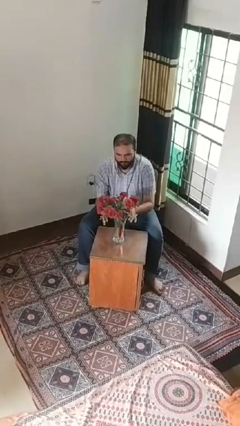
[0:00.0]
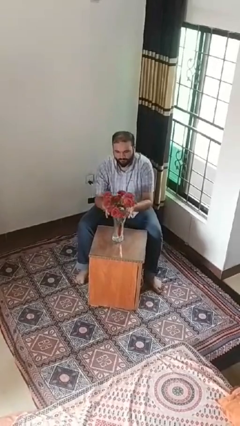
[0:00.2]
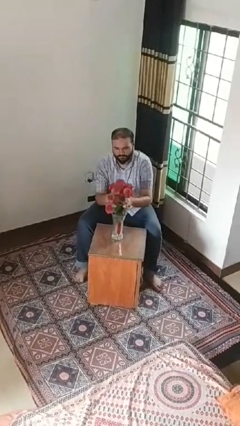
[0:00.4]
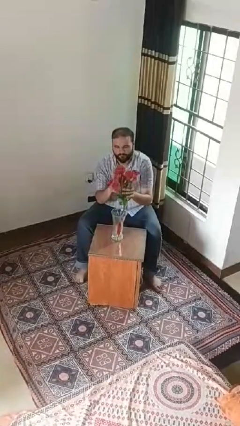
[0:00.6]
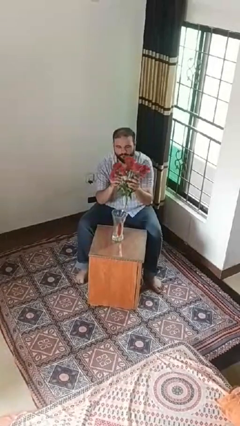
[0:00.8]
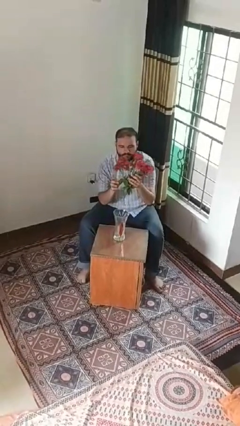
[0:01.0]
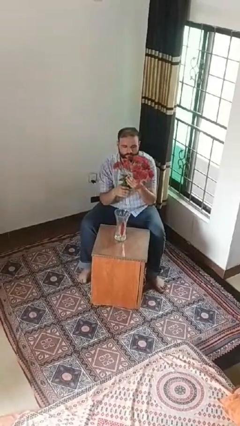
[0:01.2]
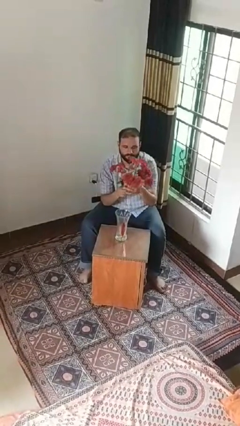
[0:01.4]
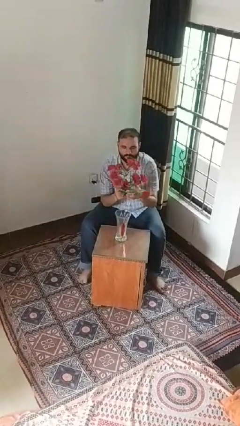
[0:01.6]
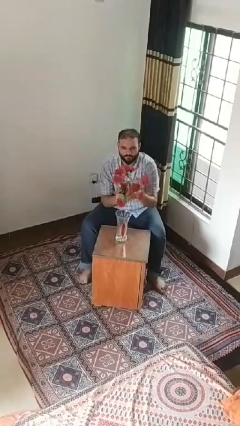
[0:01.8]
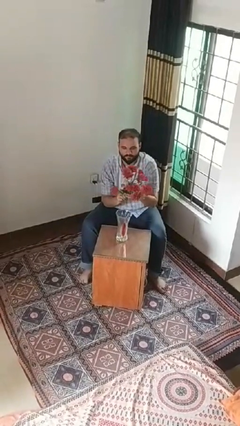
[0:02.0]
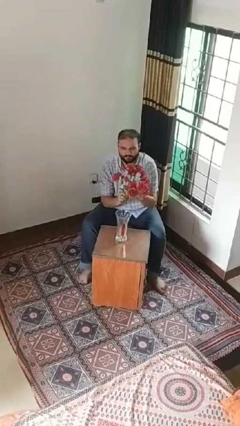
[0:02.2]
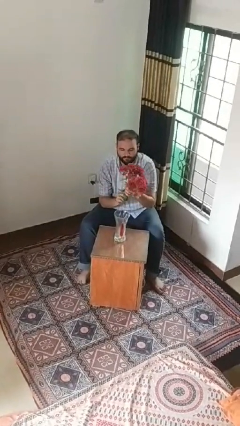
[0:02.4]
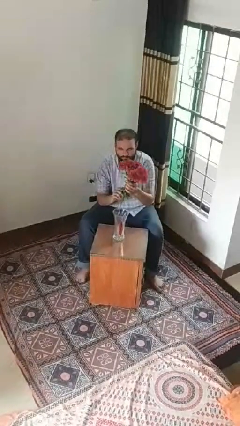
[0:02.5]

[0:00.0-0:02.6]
person arranges flowers in vase

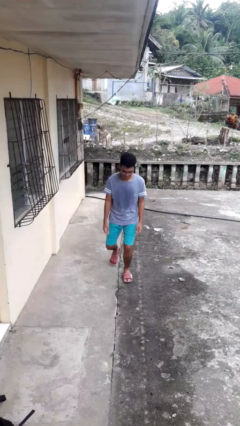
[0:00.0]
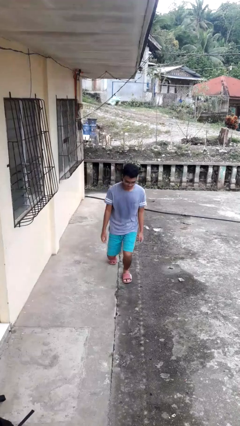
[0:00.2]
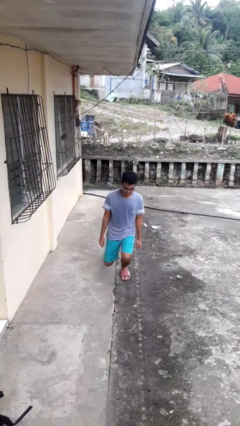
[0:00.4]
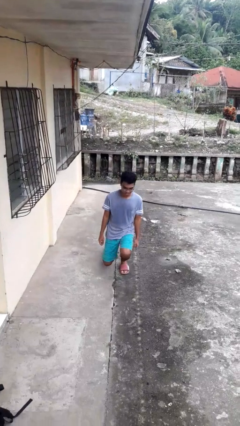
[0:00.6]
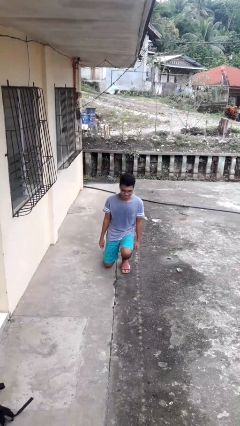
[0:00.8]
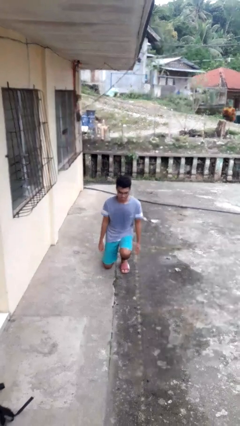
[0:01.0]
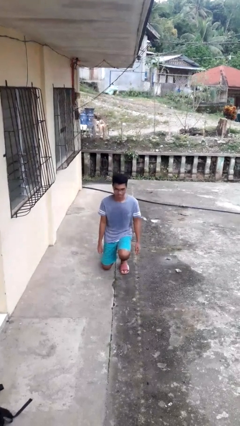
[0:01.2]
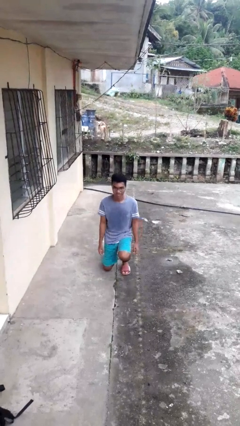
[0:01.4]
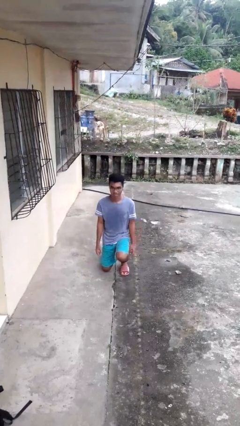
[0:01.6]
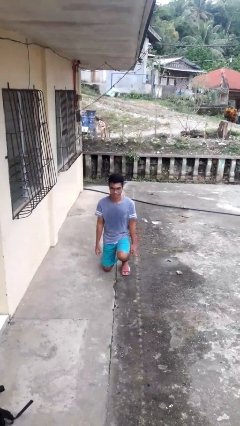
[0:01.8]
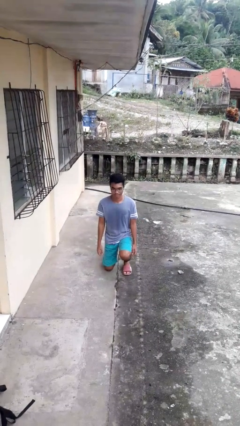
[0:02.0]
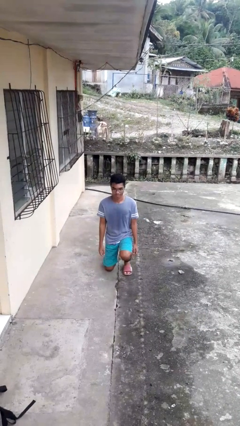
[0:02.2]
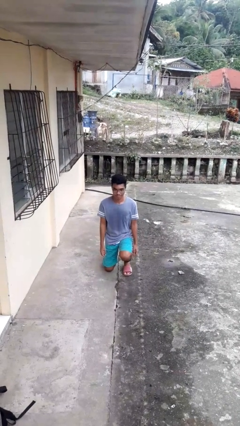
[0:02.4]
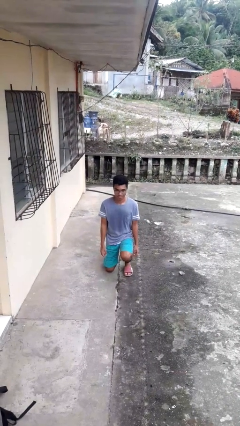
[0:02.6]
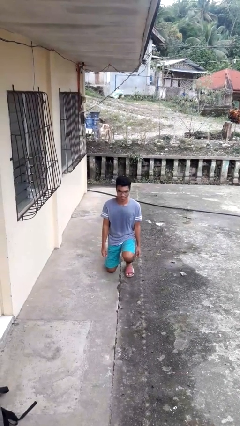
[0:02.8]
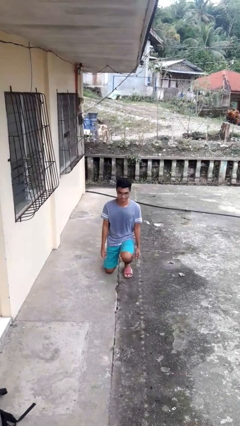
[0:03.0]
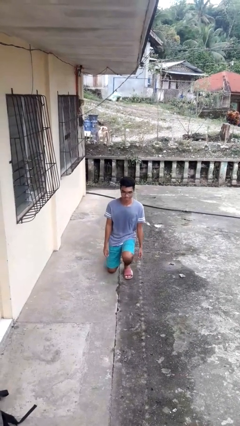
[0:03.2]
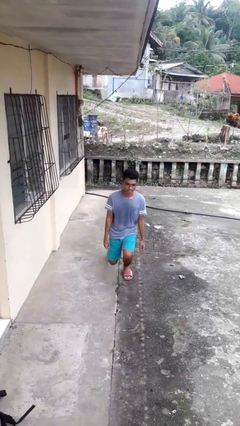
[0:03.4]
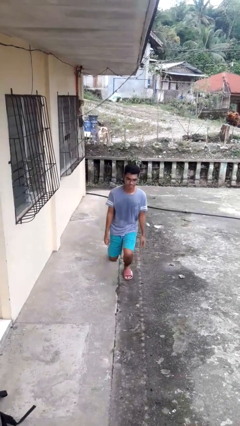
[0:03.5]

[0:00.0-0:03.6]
person kneels

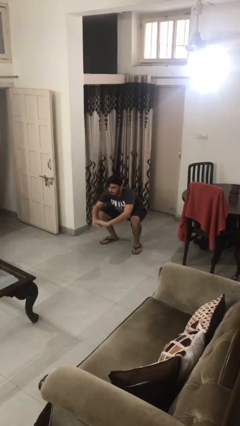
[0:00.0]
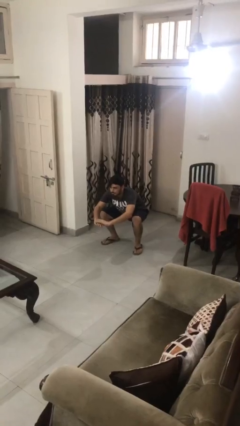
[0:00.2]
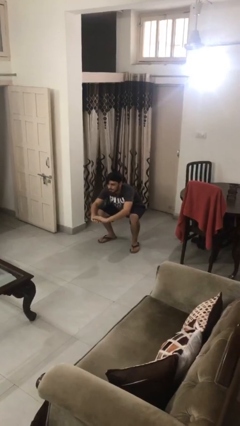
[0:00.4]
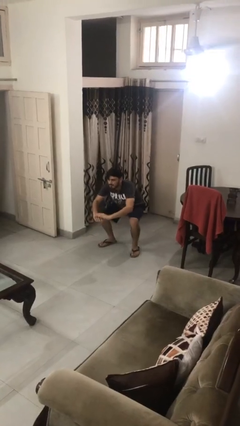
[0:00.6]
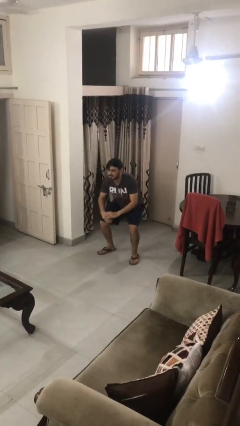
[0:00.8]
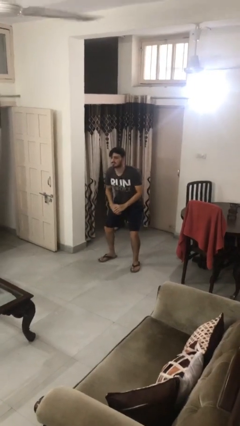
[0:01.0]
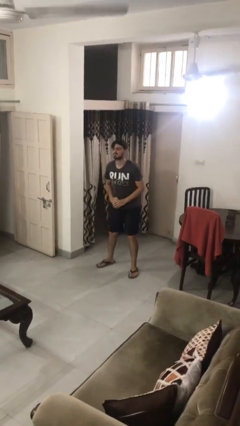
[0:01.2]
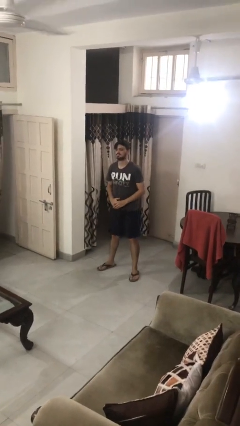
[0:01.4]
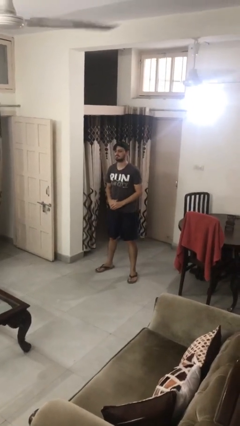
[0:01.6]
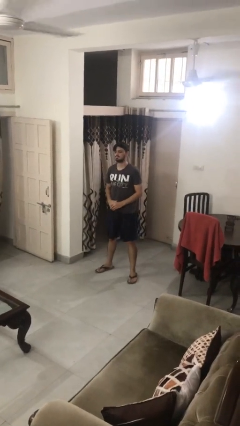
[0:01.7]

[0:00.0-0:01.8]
person stands up

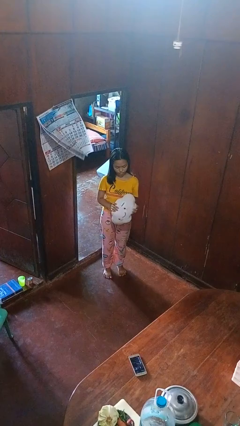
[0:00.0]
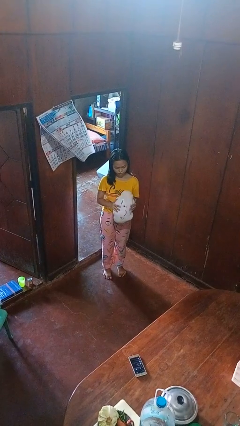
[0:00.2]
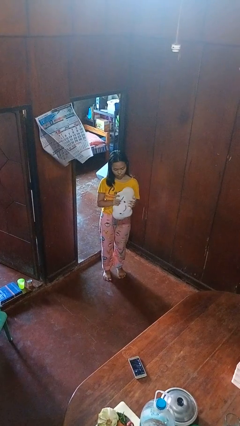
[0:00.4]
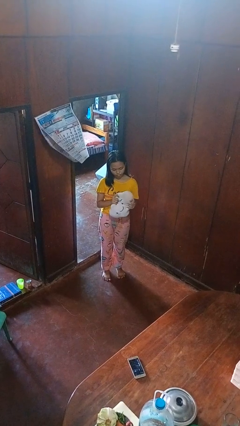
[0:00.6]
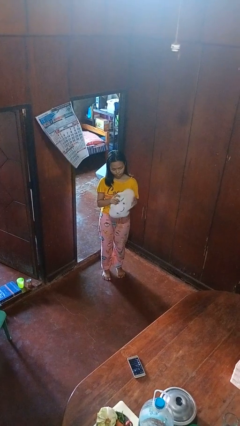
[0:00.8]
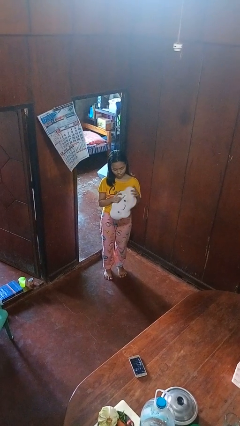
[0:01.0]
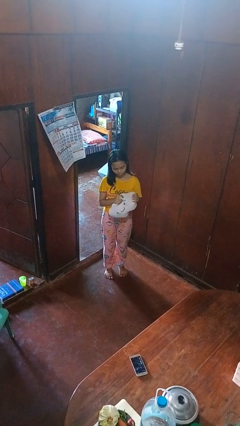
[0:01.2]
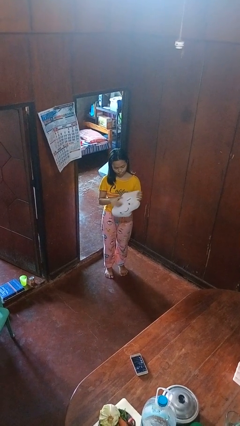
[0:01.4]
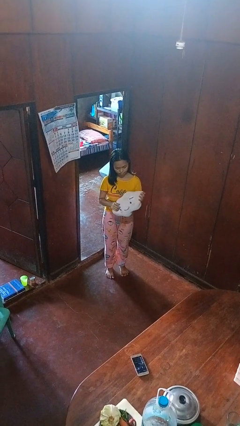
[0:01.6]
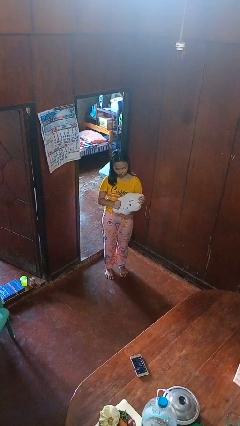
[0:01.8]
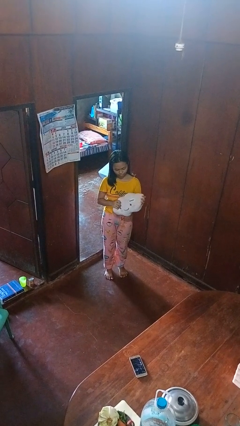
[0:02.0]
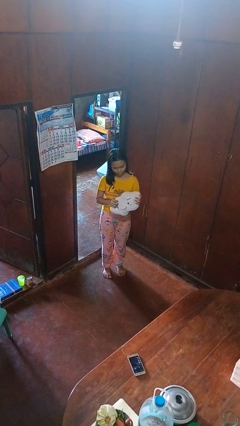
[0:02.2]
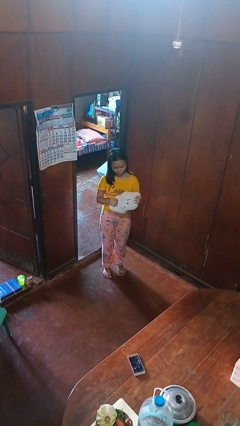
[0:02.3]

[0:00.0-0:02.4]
person squeezes object

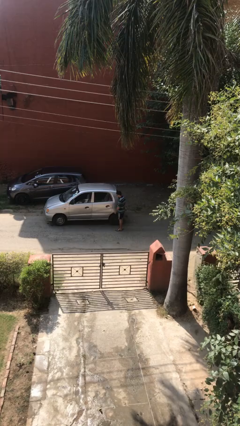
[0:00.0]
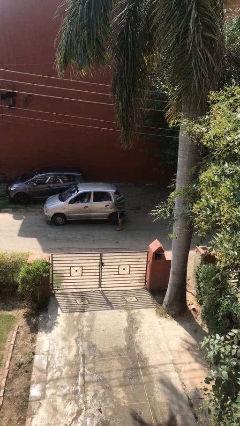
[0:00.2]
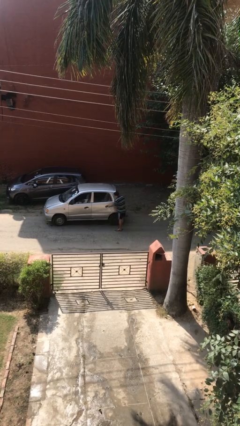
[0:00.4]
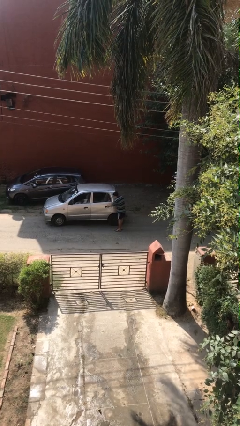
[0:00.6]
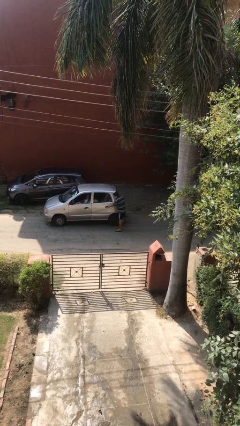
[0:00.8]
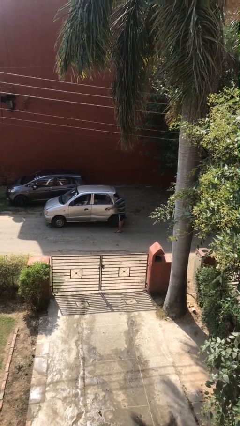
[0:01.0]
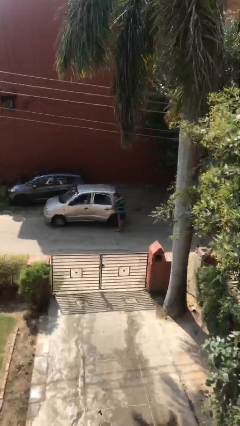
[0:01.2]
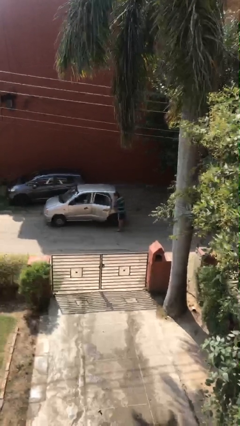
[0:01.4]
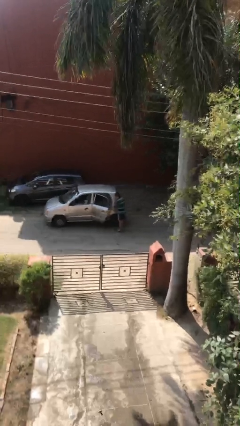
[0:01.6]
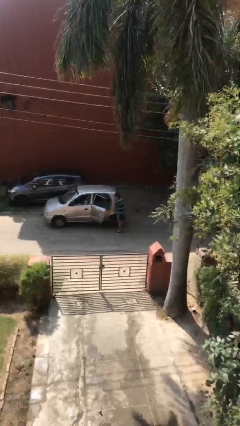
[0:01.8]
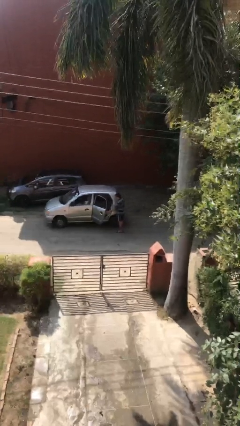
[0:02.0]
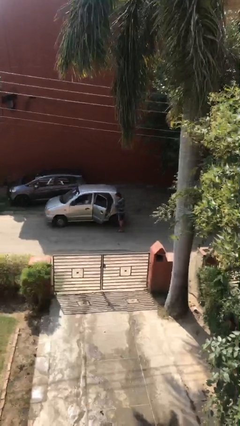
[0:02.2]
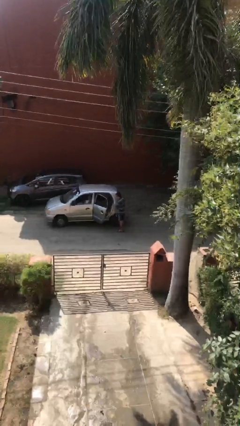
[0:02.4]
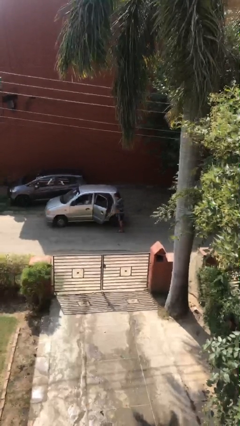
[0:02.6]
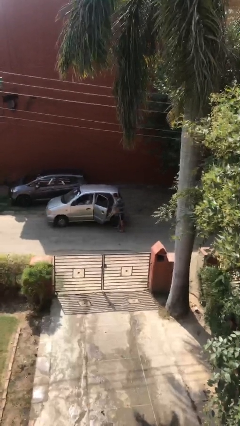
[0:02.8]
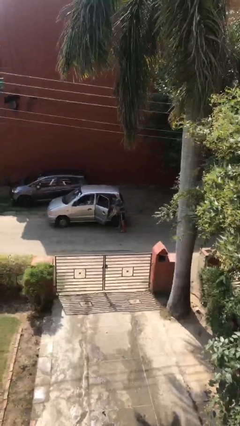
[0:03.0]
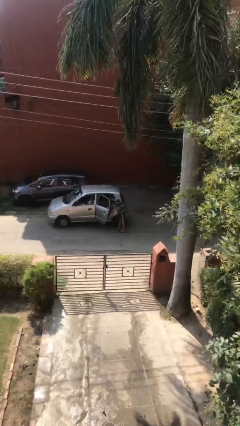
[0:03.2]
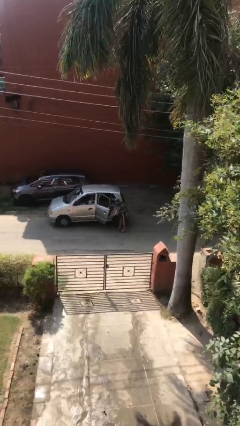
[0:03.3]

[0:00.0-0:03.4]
person opens car door

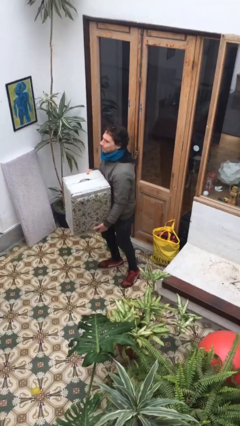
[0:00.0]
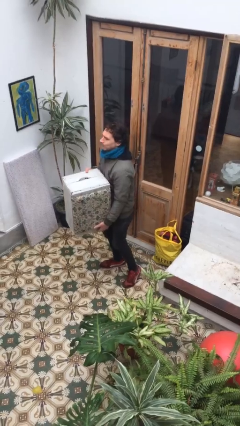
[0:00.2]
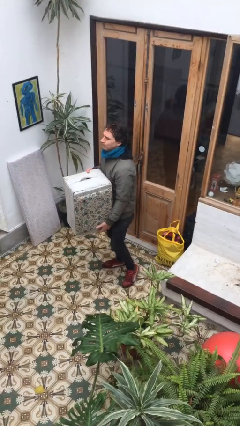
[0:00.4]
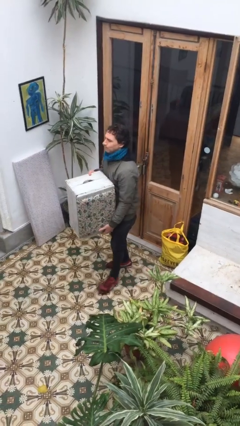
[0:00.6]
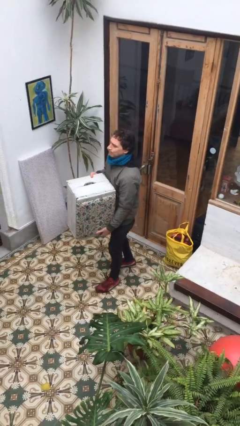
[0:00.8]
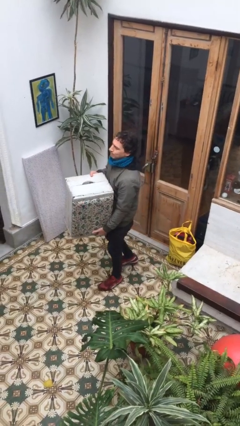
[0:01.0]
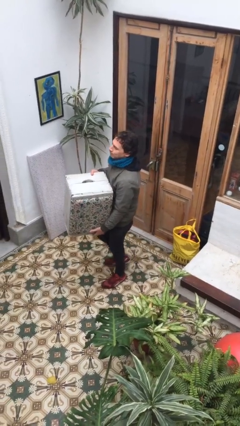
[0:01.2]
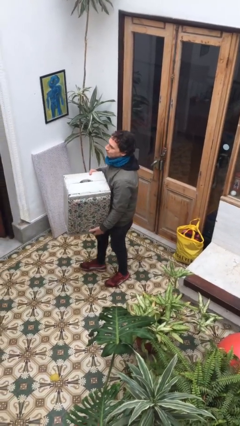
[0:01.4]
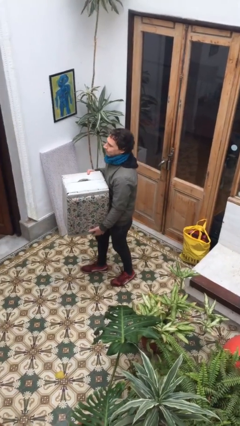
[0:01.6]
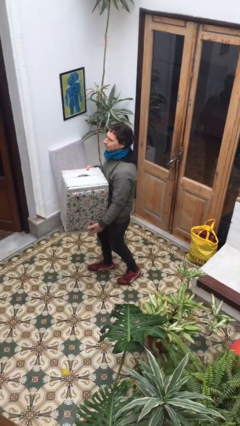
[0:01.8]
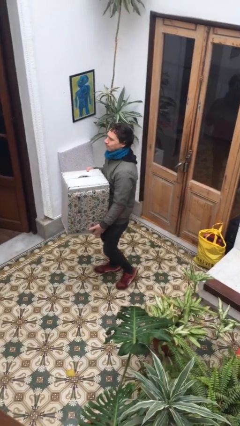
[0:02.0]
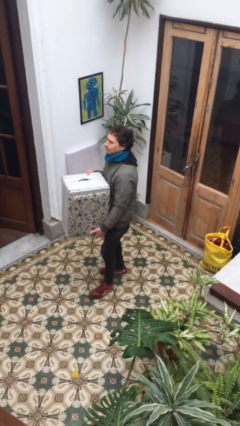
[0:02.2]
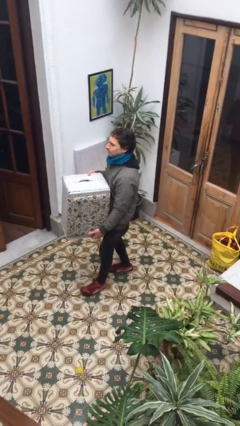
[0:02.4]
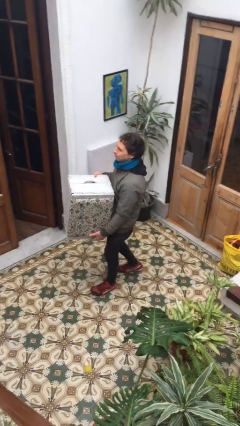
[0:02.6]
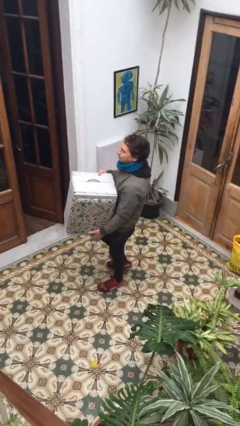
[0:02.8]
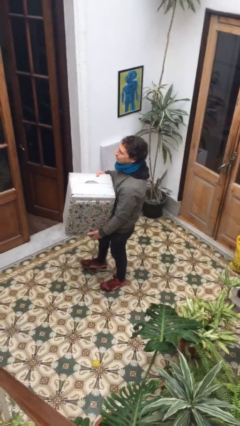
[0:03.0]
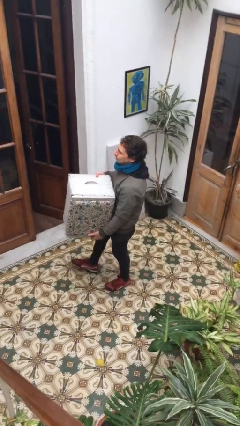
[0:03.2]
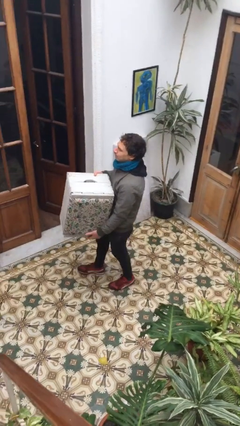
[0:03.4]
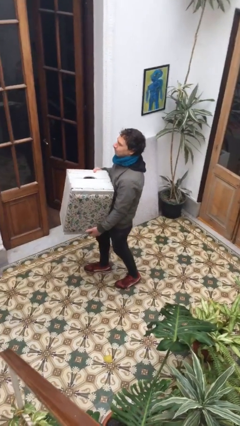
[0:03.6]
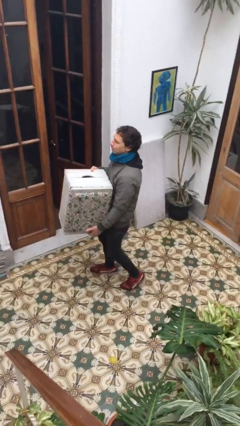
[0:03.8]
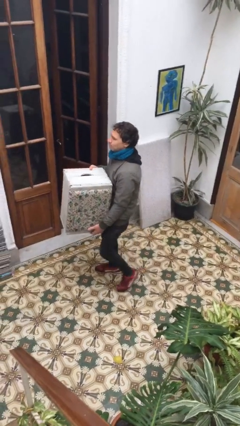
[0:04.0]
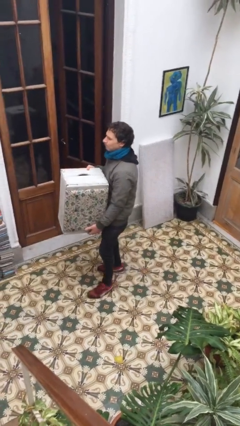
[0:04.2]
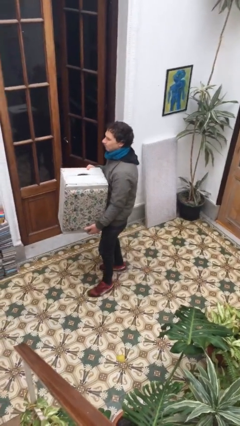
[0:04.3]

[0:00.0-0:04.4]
person carries heavy object
